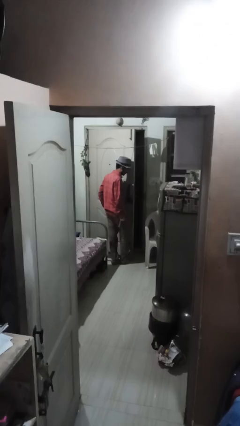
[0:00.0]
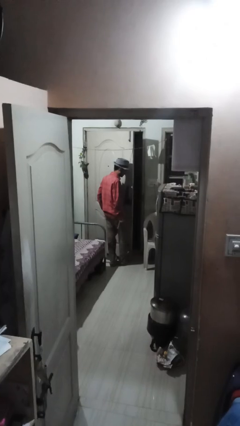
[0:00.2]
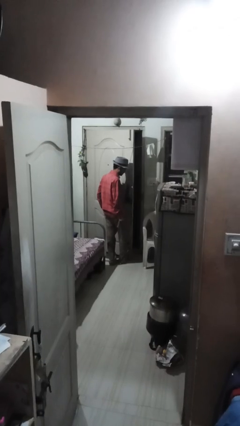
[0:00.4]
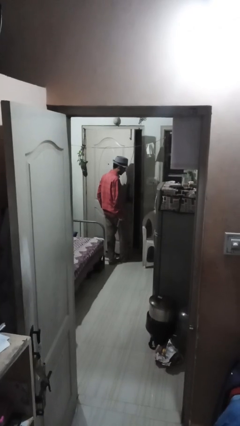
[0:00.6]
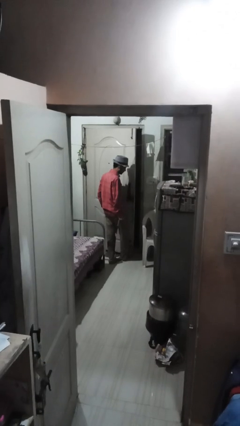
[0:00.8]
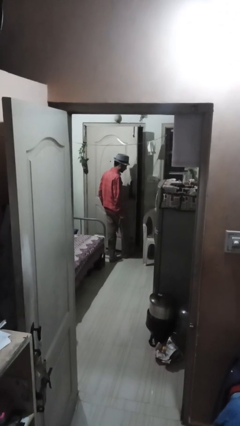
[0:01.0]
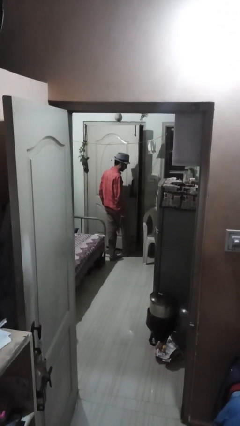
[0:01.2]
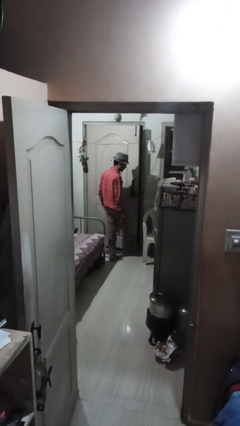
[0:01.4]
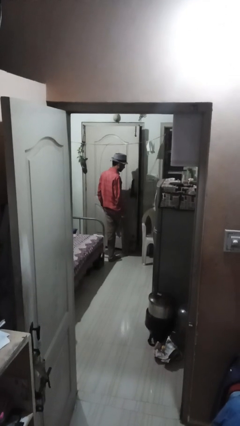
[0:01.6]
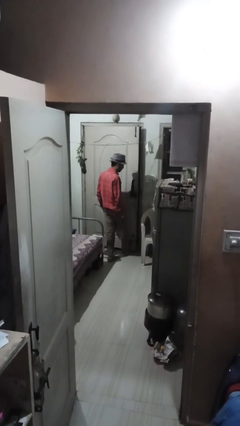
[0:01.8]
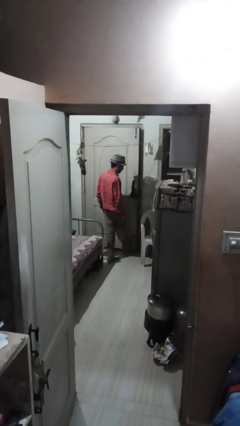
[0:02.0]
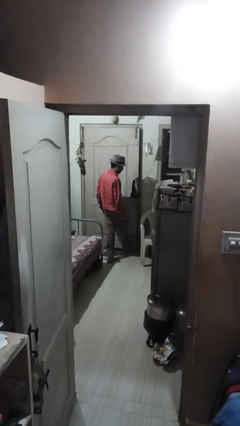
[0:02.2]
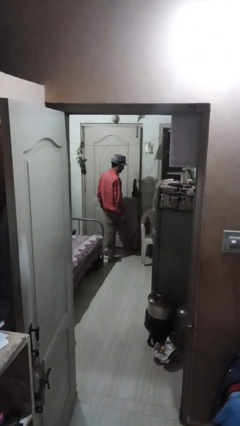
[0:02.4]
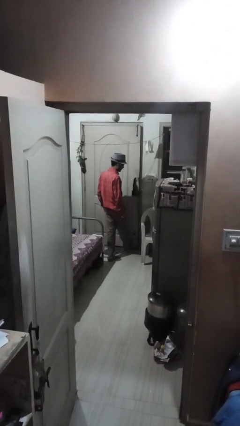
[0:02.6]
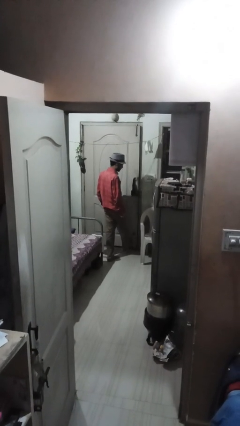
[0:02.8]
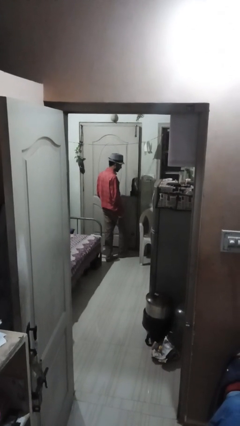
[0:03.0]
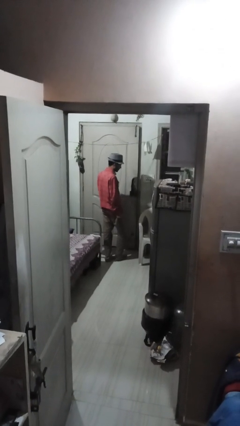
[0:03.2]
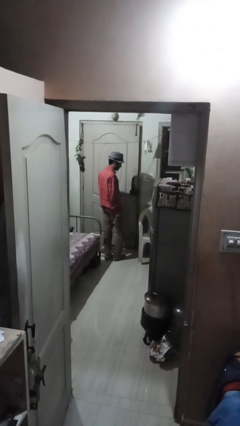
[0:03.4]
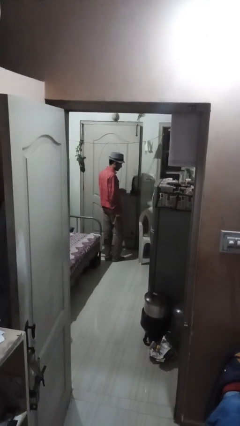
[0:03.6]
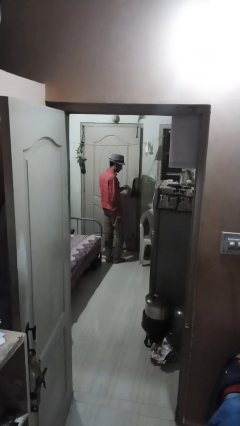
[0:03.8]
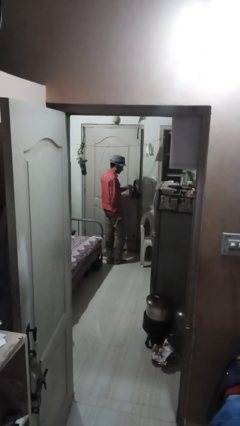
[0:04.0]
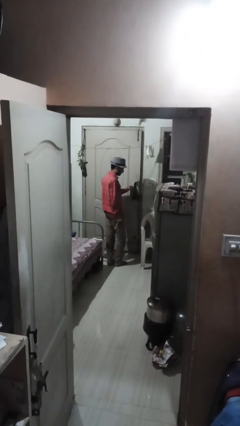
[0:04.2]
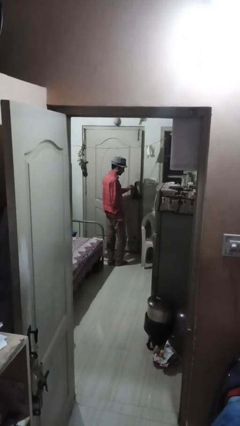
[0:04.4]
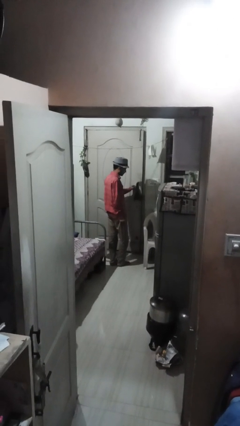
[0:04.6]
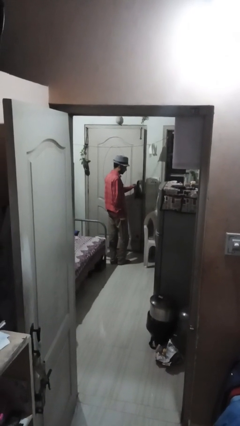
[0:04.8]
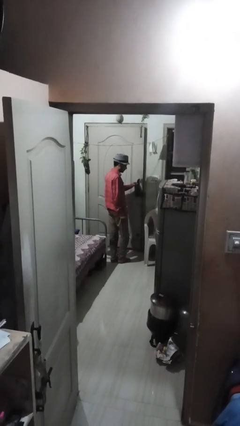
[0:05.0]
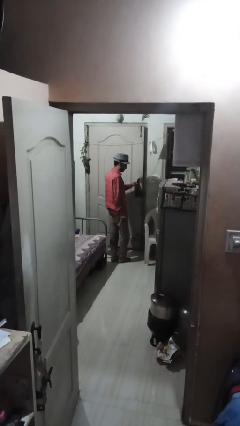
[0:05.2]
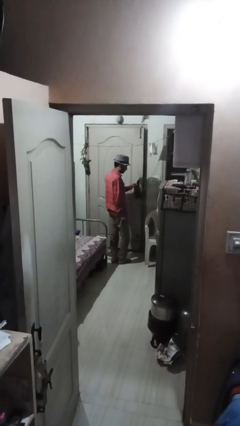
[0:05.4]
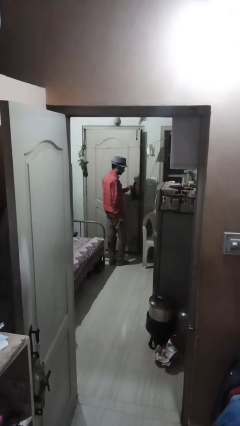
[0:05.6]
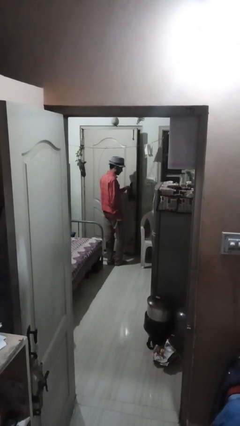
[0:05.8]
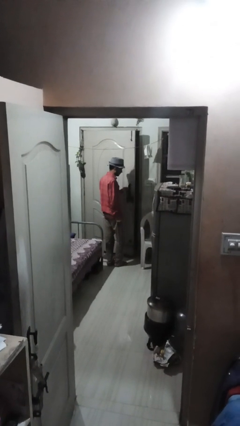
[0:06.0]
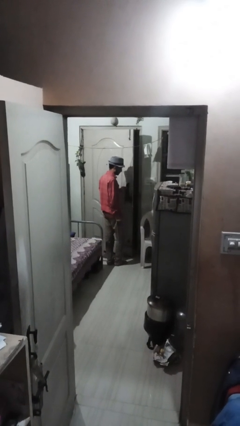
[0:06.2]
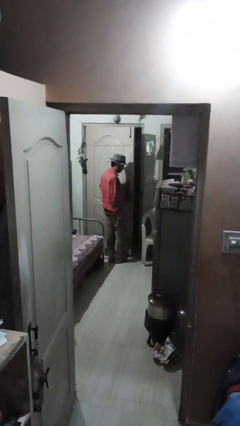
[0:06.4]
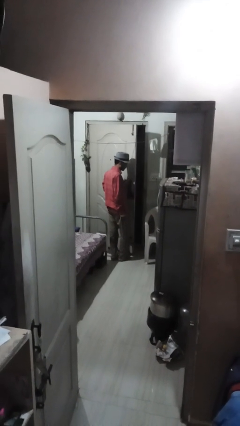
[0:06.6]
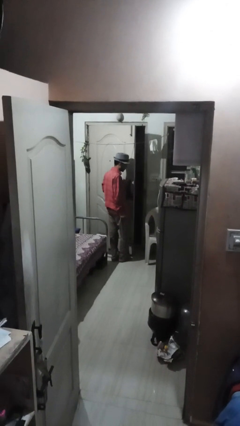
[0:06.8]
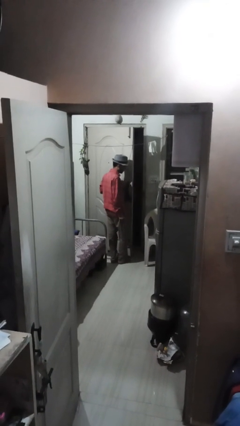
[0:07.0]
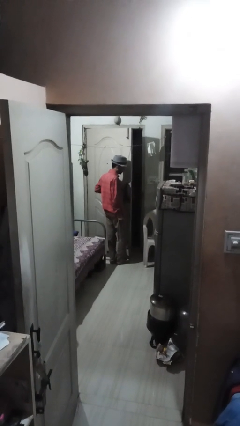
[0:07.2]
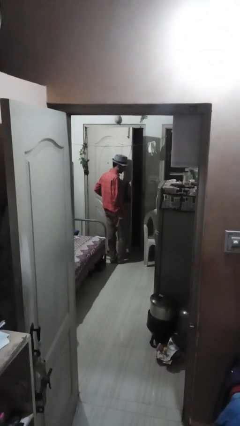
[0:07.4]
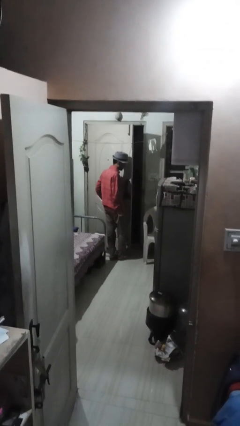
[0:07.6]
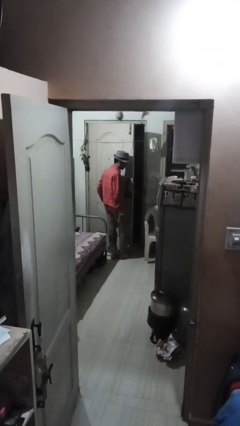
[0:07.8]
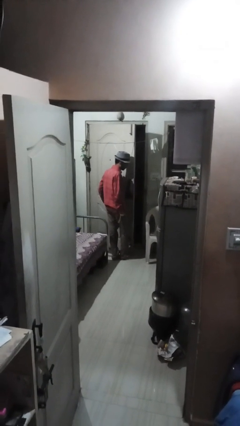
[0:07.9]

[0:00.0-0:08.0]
person closes door with foot

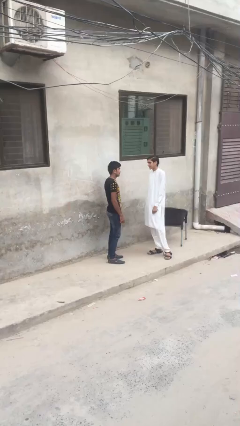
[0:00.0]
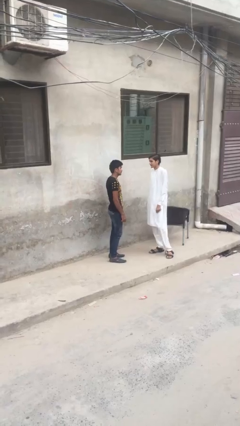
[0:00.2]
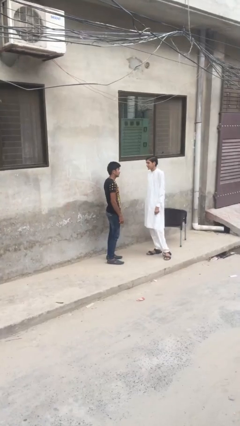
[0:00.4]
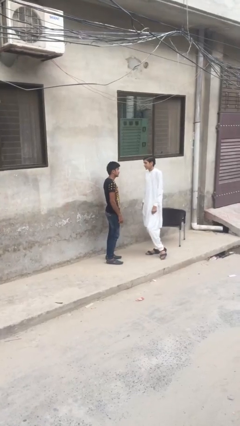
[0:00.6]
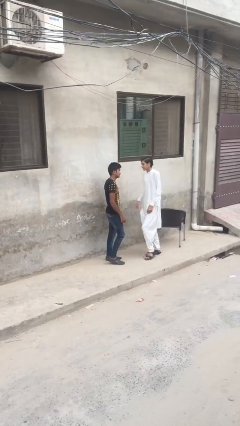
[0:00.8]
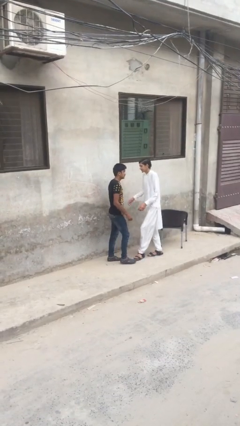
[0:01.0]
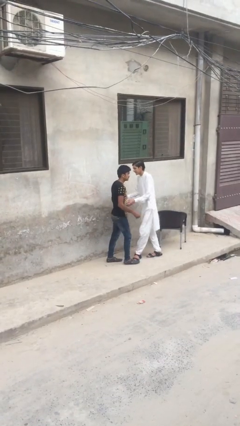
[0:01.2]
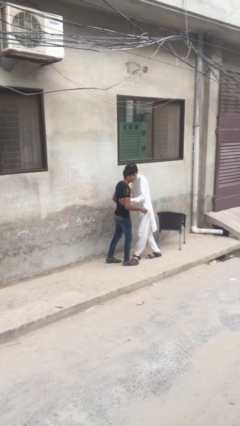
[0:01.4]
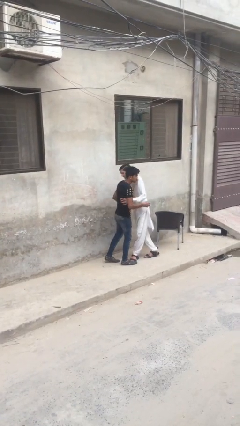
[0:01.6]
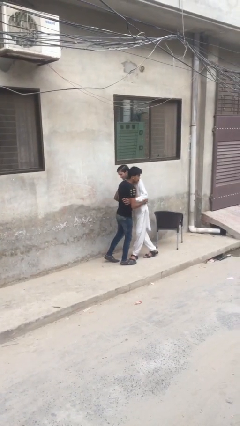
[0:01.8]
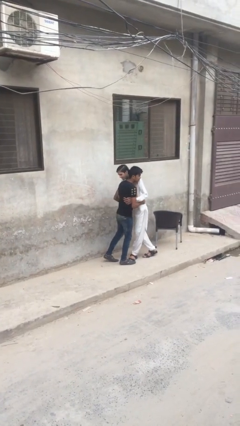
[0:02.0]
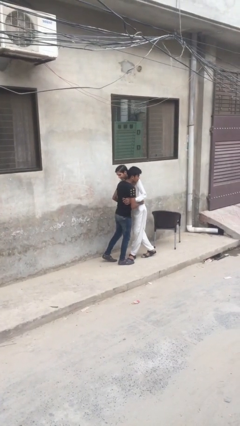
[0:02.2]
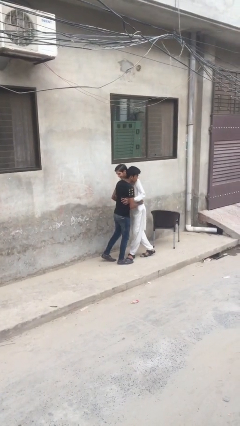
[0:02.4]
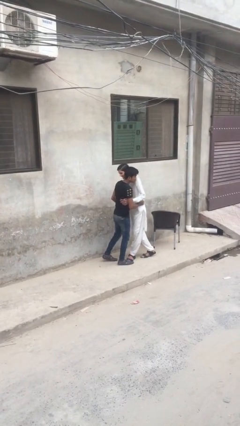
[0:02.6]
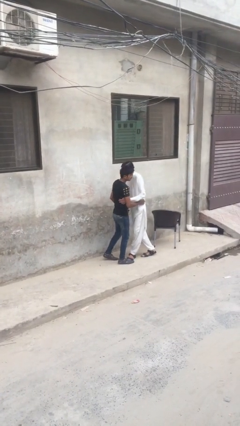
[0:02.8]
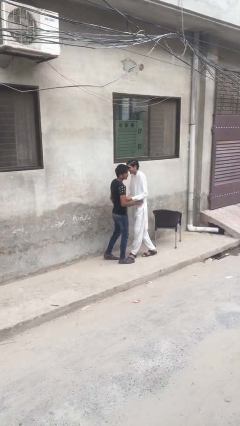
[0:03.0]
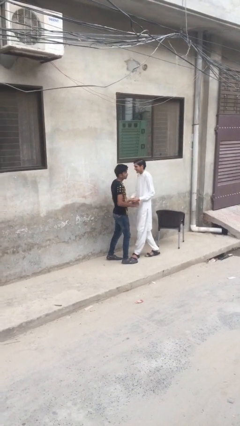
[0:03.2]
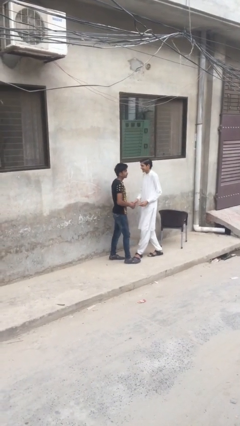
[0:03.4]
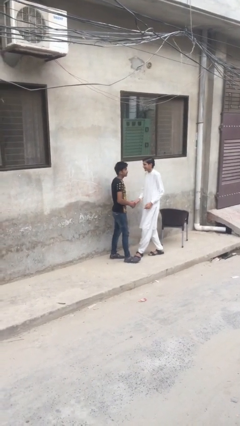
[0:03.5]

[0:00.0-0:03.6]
person embraces person

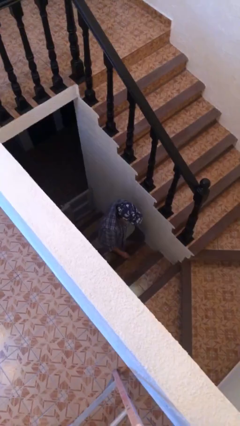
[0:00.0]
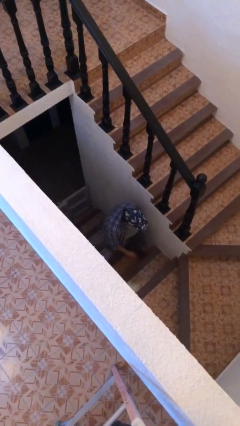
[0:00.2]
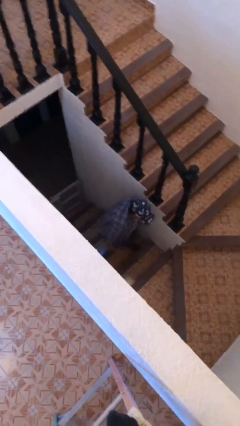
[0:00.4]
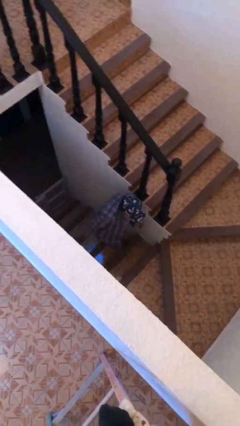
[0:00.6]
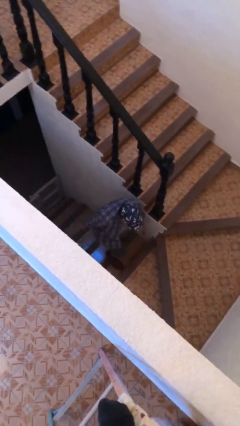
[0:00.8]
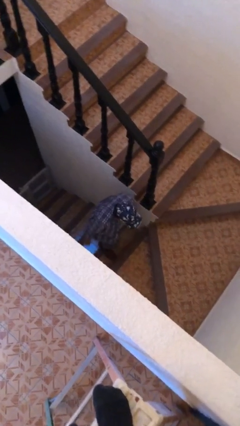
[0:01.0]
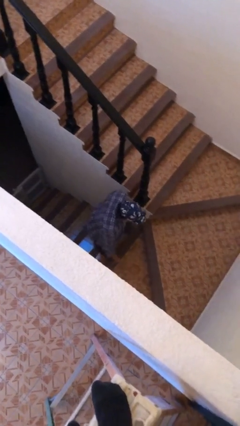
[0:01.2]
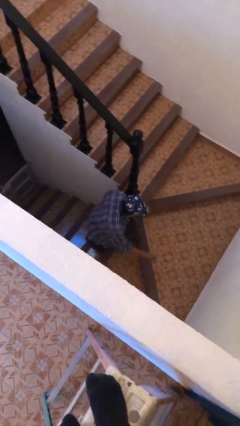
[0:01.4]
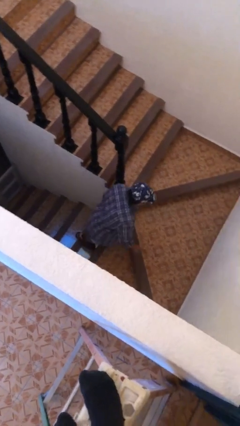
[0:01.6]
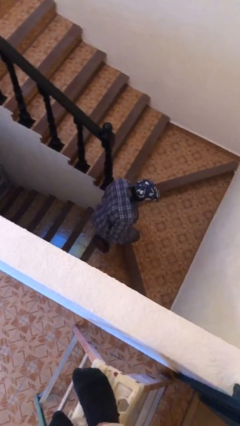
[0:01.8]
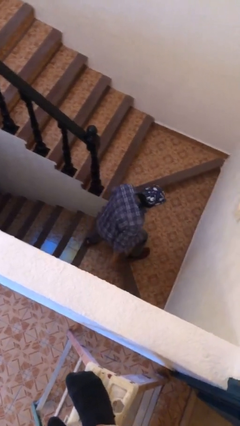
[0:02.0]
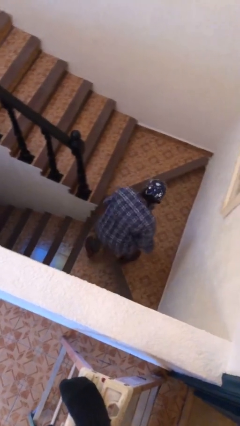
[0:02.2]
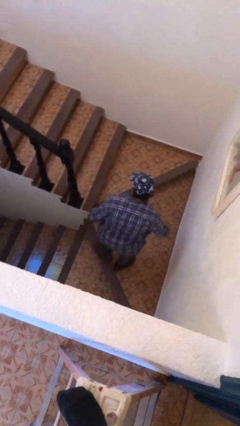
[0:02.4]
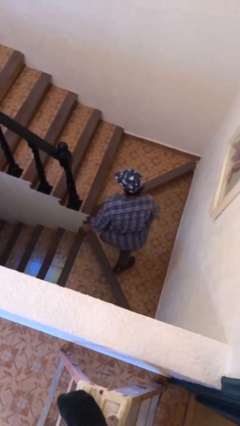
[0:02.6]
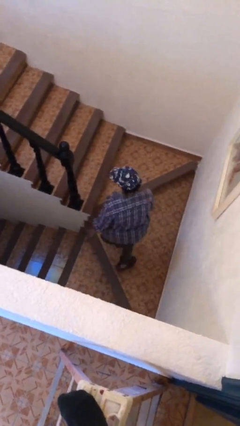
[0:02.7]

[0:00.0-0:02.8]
person climbs up stairs

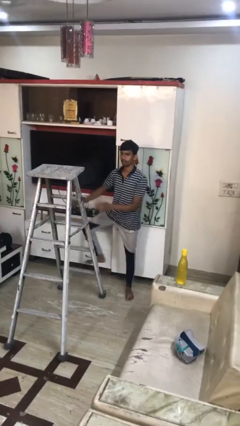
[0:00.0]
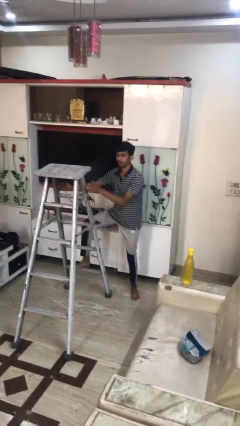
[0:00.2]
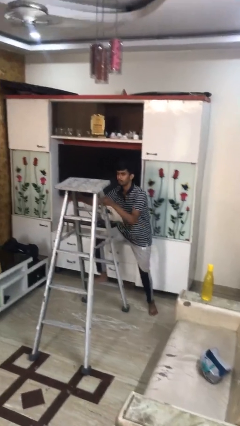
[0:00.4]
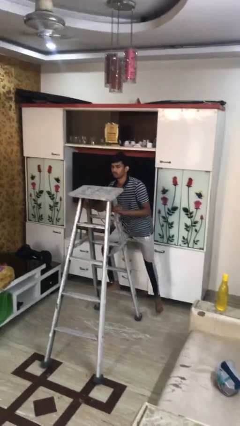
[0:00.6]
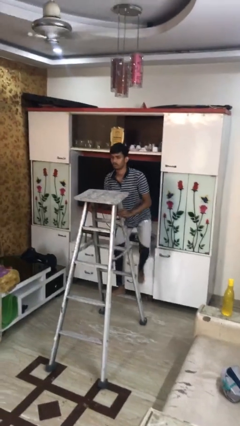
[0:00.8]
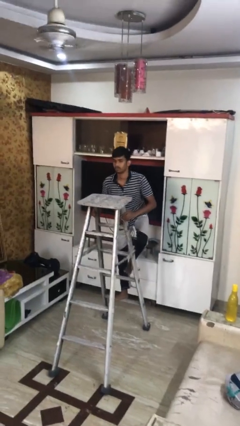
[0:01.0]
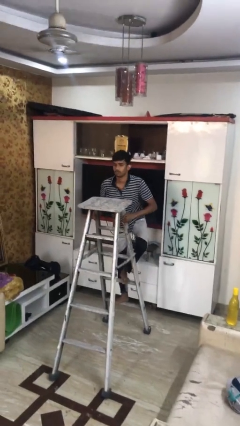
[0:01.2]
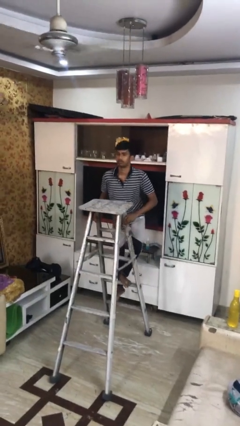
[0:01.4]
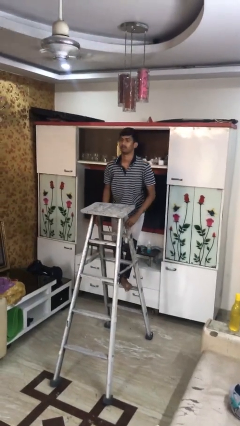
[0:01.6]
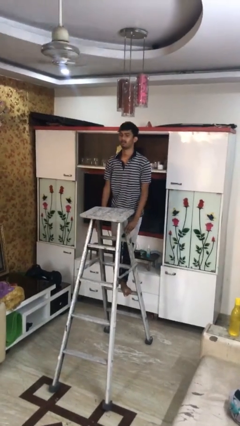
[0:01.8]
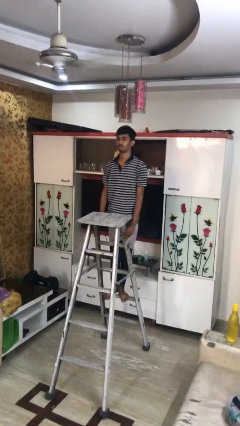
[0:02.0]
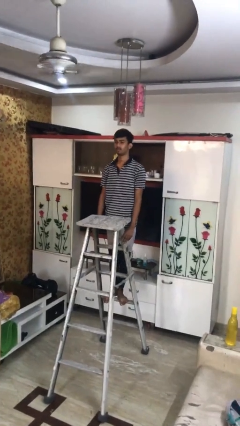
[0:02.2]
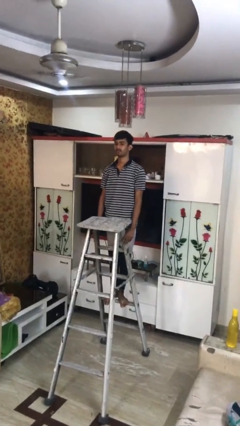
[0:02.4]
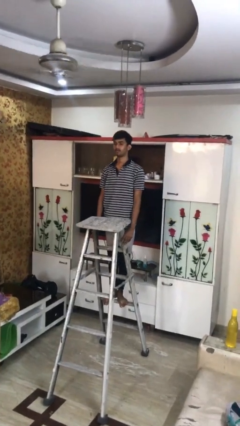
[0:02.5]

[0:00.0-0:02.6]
person climbs up ladder

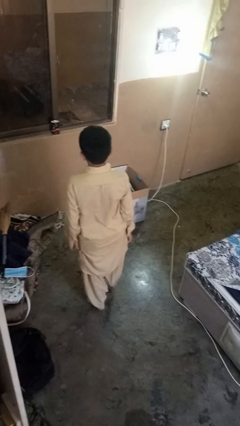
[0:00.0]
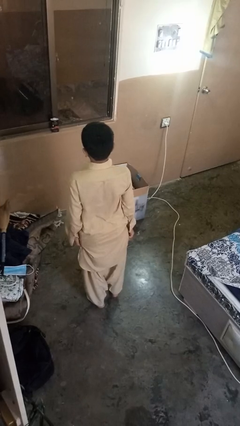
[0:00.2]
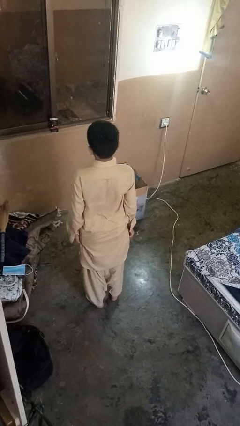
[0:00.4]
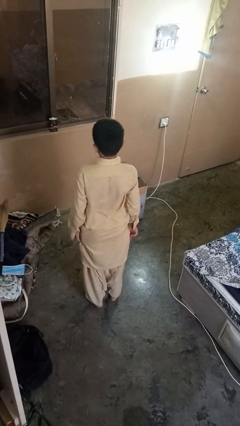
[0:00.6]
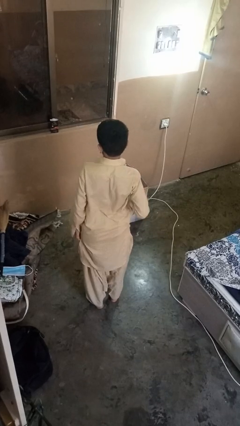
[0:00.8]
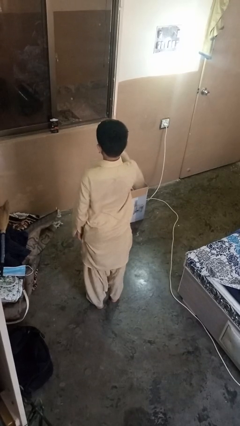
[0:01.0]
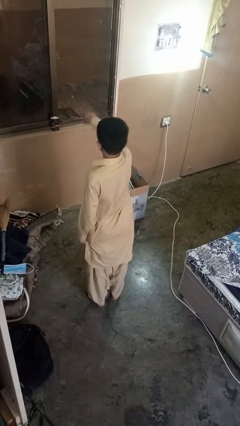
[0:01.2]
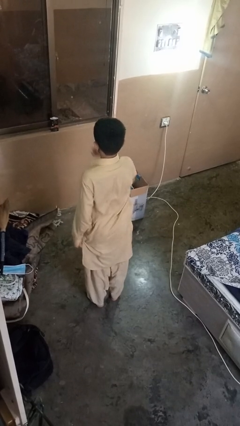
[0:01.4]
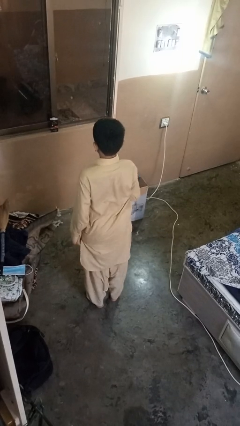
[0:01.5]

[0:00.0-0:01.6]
person karate chop
